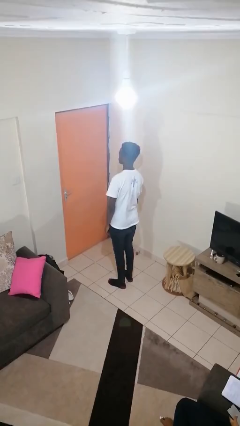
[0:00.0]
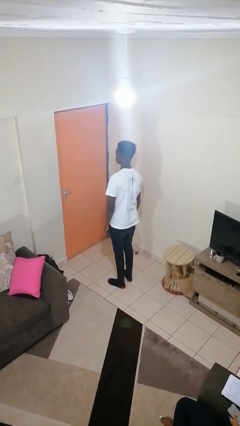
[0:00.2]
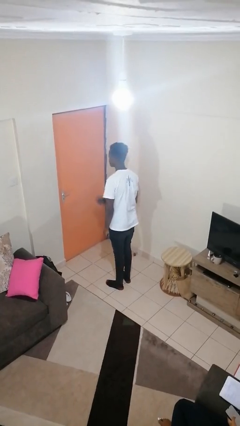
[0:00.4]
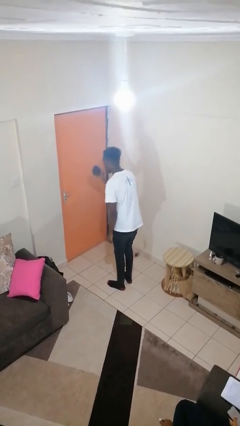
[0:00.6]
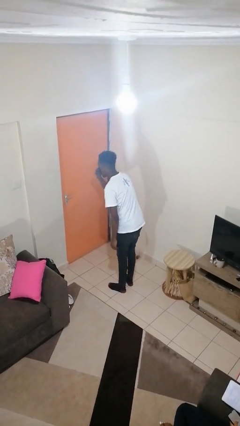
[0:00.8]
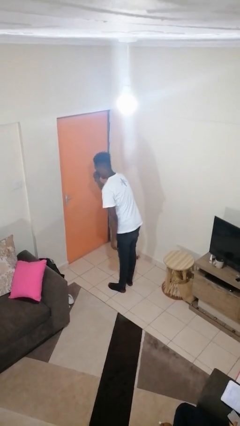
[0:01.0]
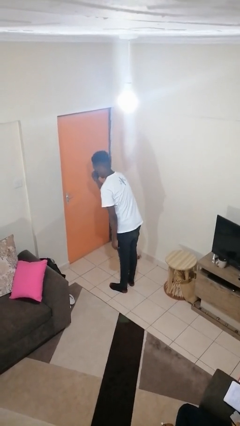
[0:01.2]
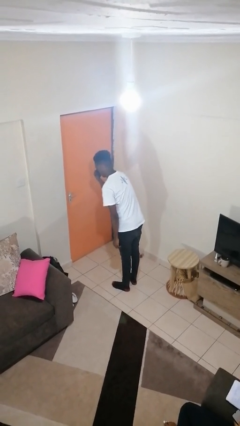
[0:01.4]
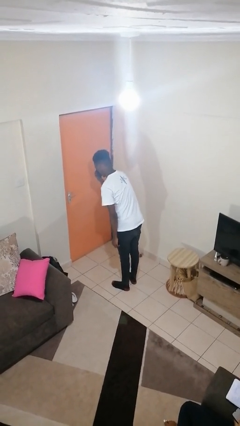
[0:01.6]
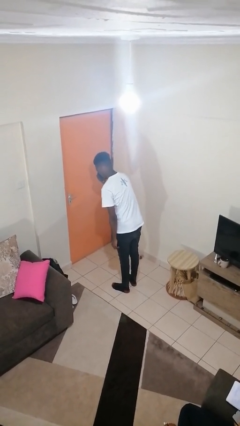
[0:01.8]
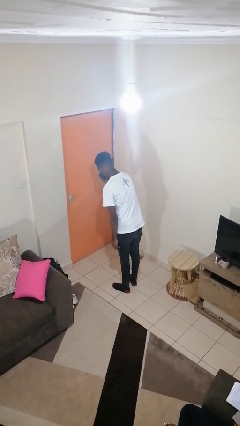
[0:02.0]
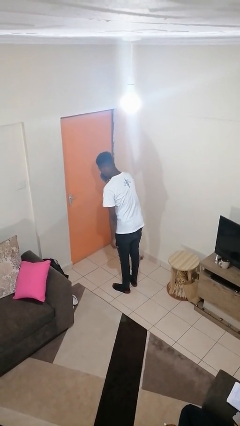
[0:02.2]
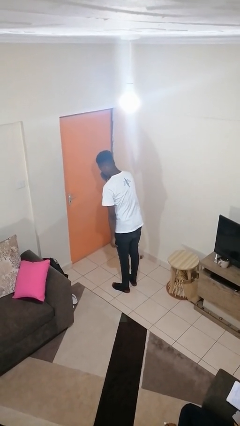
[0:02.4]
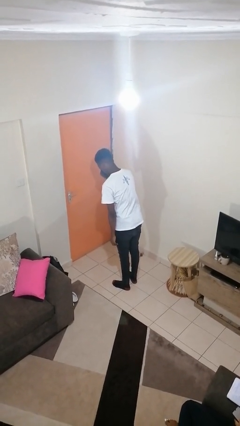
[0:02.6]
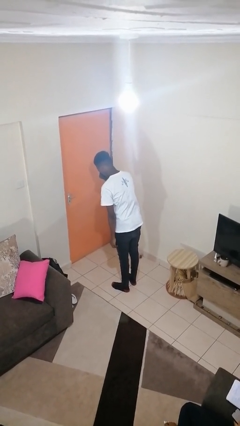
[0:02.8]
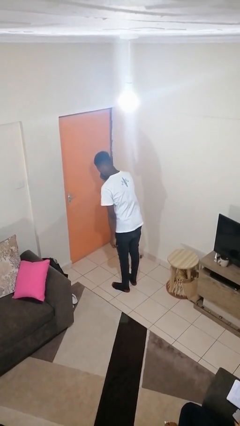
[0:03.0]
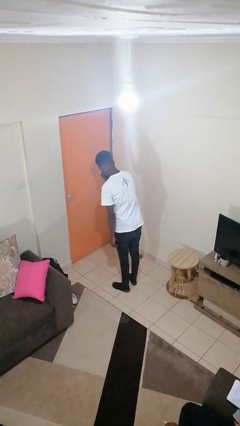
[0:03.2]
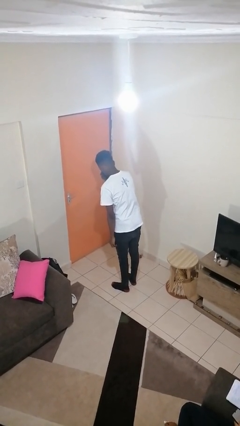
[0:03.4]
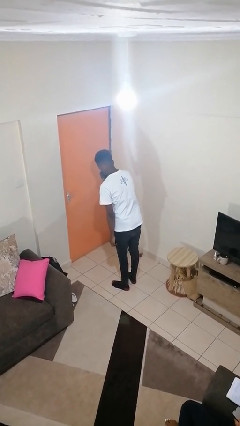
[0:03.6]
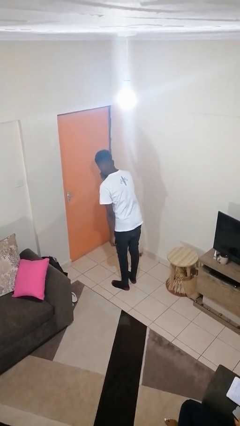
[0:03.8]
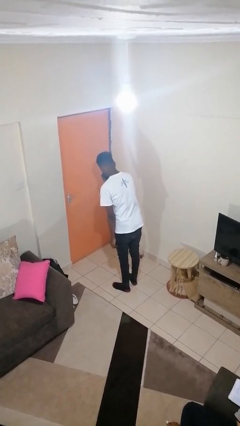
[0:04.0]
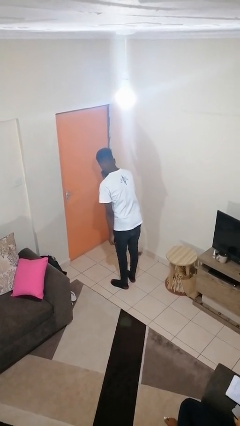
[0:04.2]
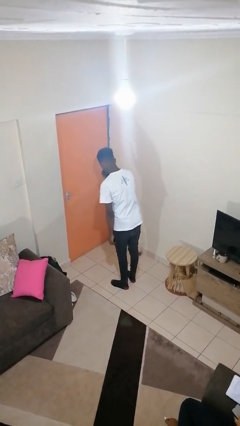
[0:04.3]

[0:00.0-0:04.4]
person blows nose

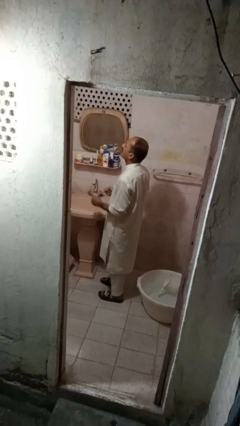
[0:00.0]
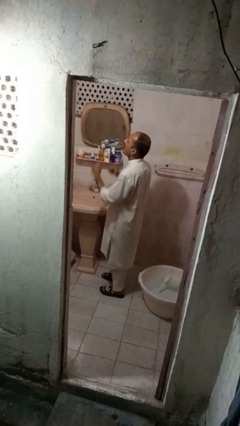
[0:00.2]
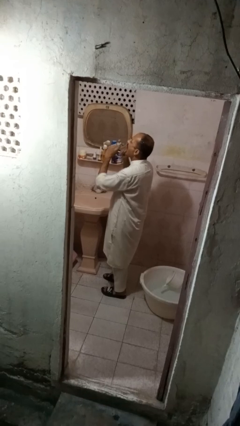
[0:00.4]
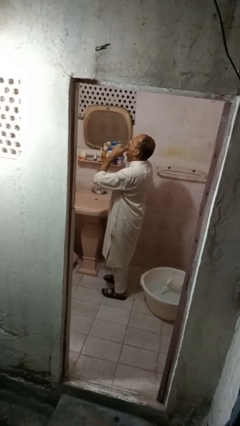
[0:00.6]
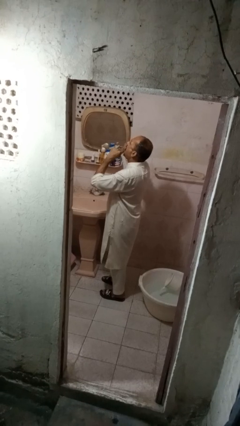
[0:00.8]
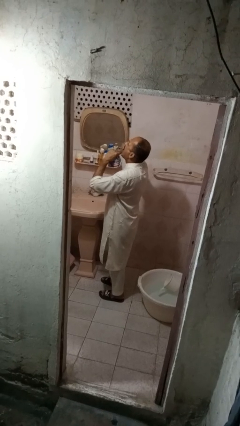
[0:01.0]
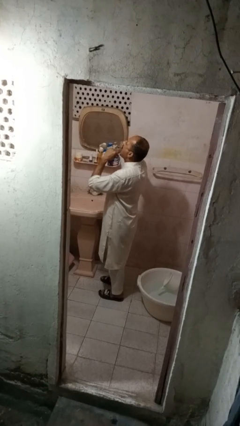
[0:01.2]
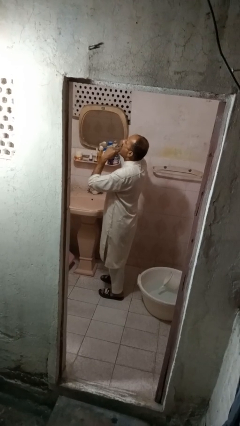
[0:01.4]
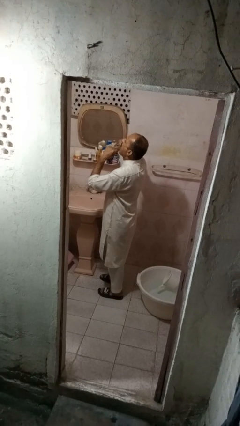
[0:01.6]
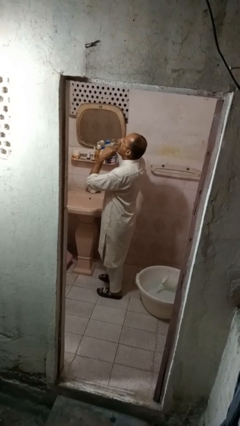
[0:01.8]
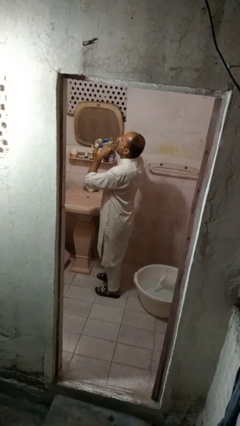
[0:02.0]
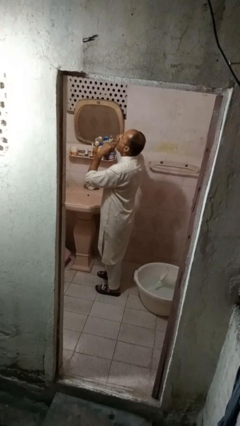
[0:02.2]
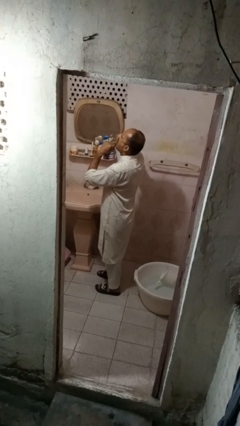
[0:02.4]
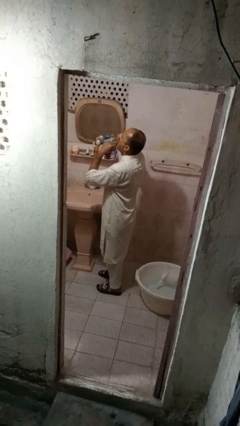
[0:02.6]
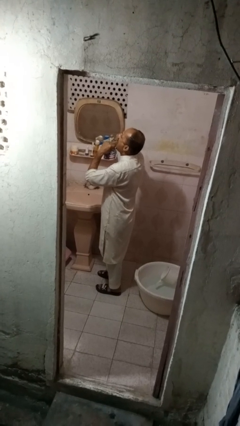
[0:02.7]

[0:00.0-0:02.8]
person flosses

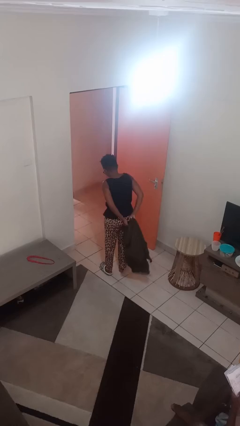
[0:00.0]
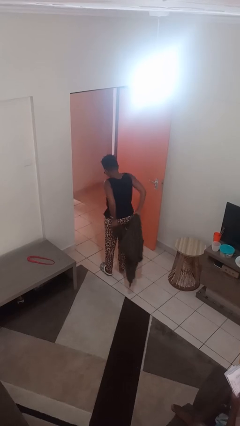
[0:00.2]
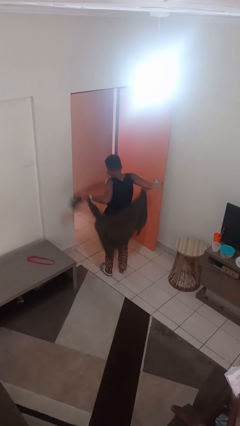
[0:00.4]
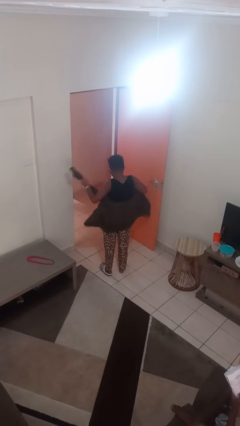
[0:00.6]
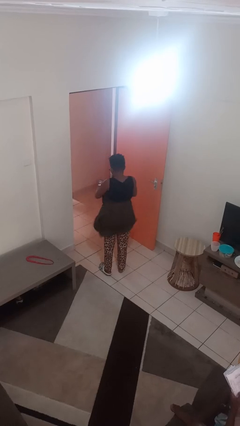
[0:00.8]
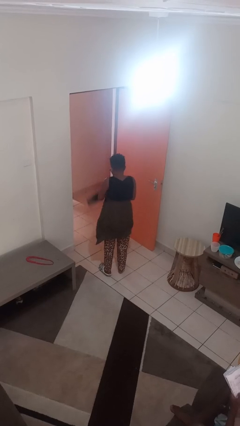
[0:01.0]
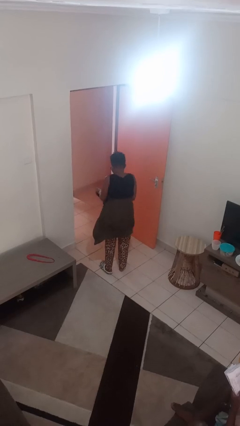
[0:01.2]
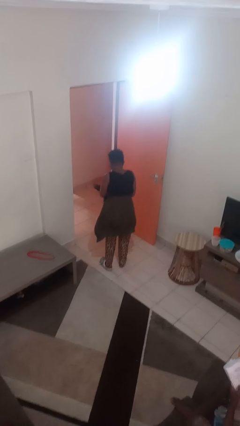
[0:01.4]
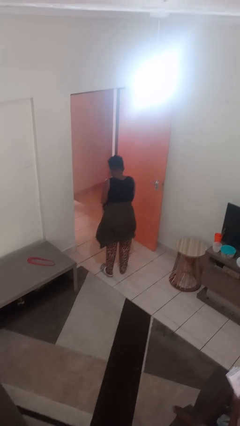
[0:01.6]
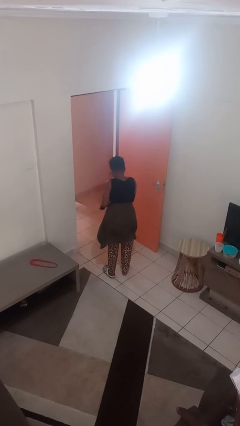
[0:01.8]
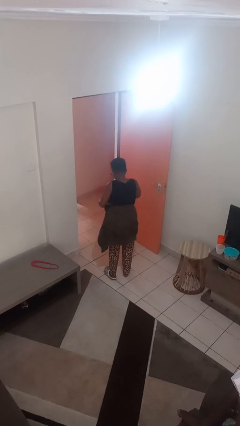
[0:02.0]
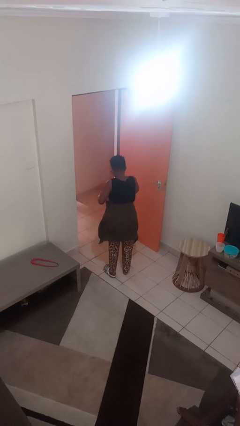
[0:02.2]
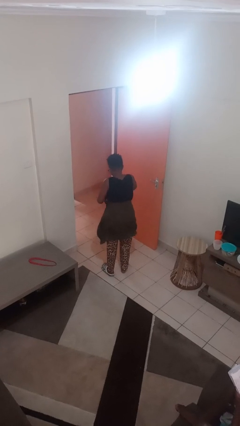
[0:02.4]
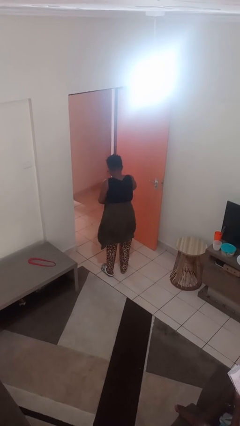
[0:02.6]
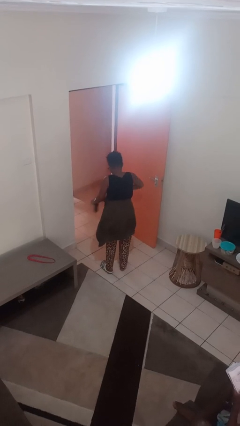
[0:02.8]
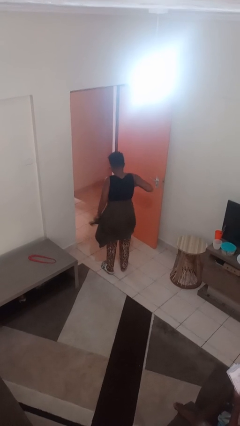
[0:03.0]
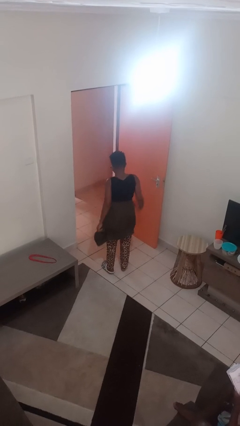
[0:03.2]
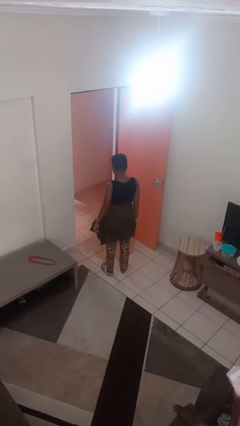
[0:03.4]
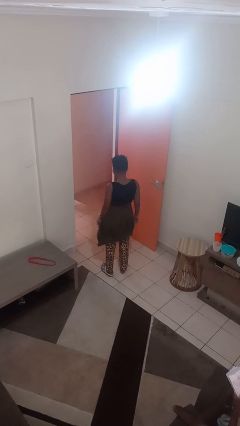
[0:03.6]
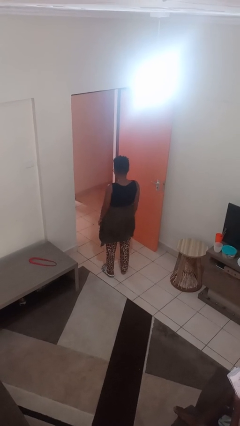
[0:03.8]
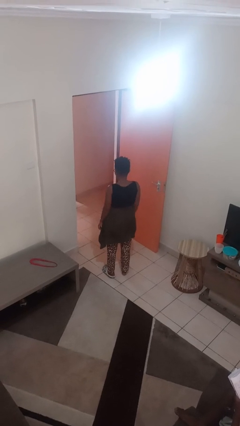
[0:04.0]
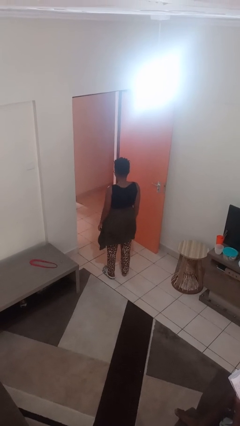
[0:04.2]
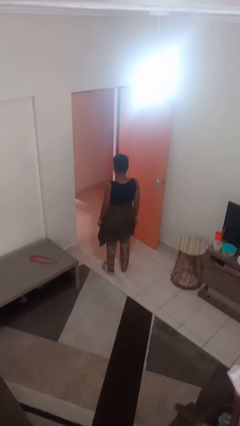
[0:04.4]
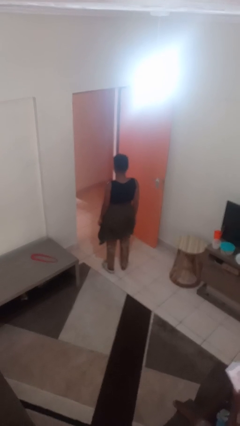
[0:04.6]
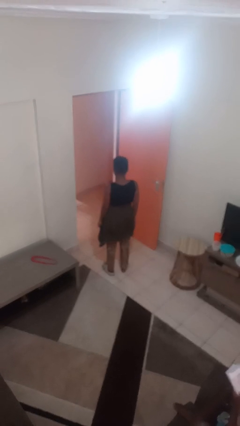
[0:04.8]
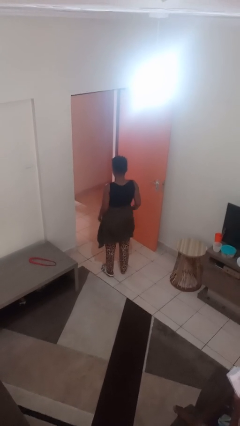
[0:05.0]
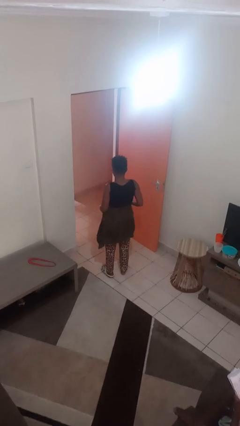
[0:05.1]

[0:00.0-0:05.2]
person ties jacket around waist

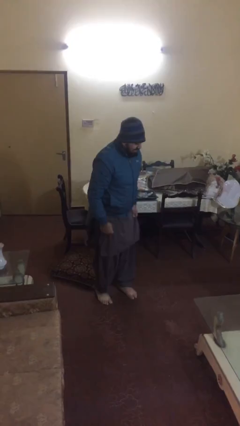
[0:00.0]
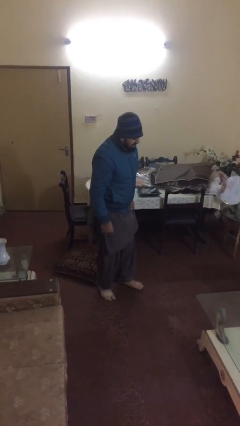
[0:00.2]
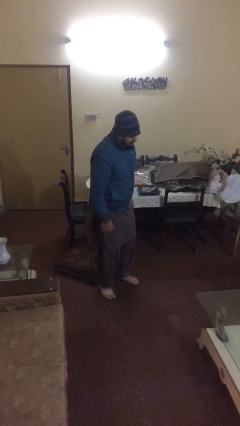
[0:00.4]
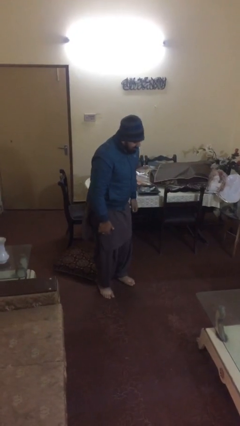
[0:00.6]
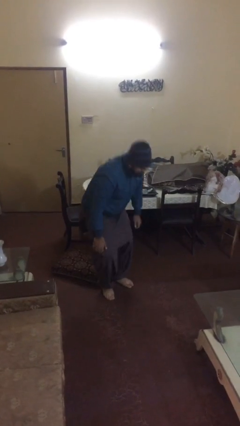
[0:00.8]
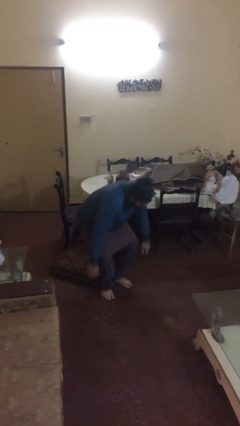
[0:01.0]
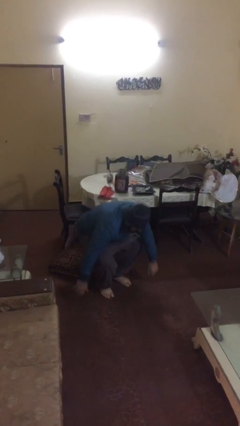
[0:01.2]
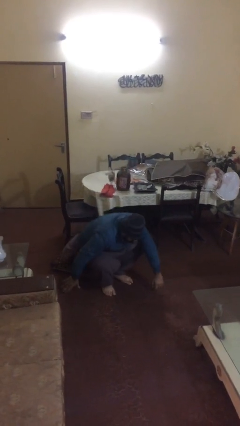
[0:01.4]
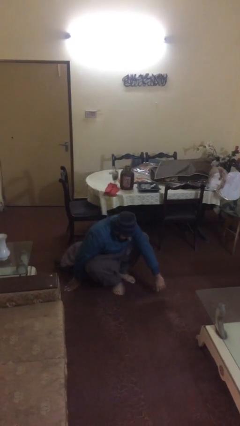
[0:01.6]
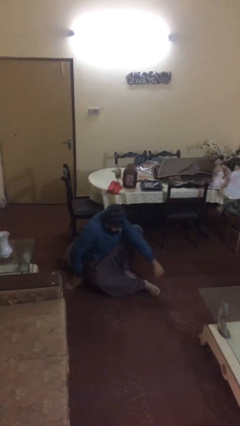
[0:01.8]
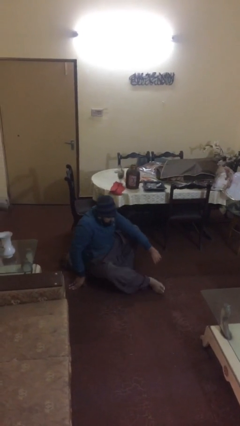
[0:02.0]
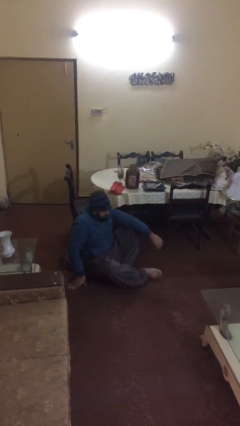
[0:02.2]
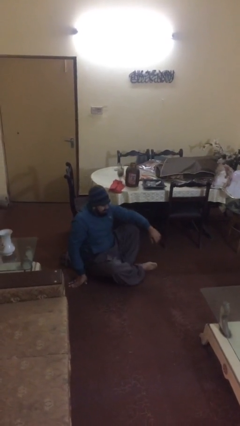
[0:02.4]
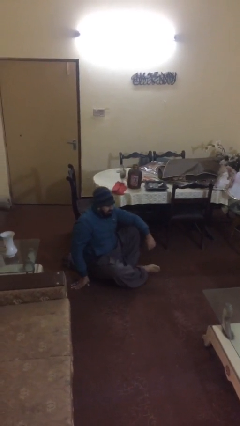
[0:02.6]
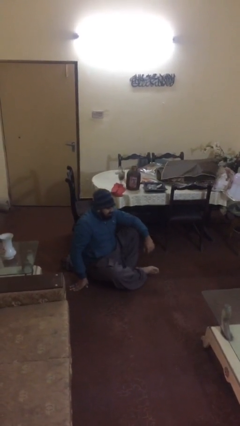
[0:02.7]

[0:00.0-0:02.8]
person sits down

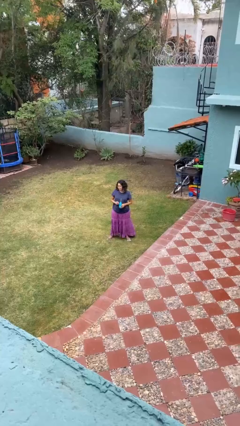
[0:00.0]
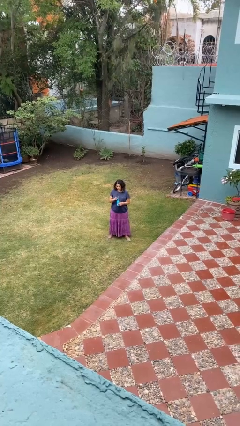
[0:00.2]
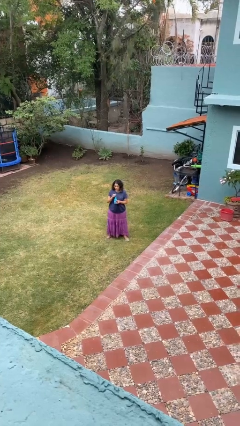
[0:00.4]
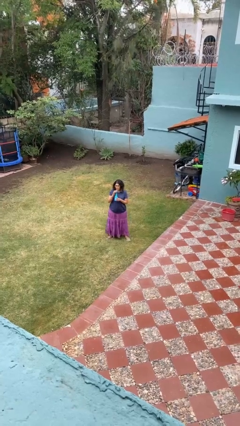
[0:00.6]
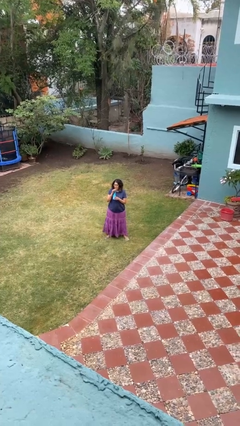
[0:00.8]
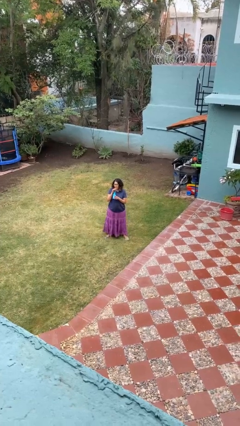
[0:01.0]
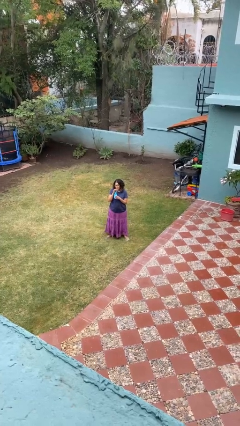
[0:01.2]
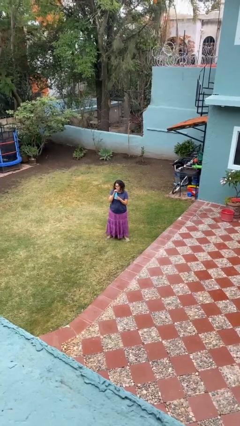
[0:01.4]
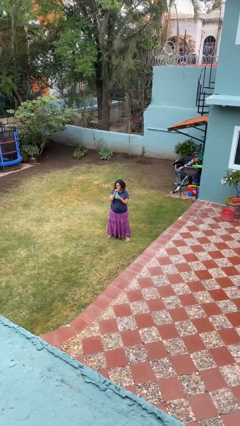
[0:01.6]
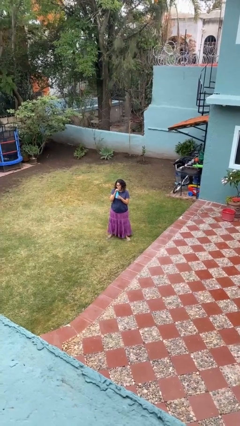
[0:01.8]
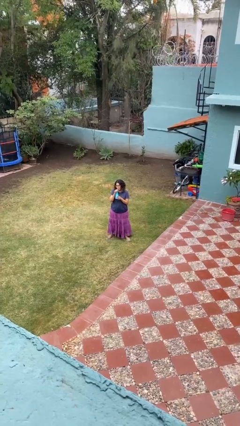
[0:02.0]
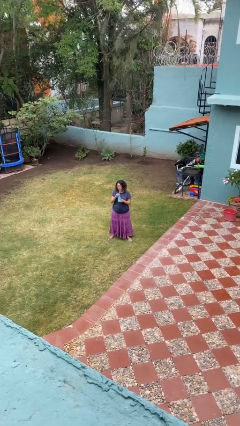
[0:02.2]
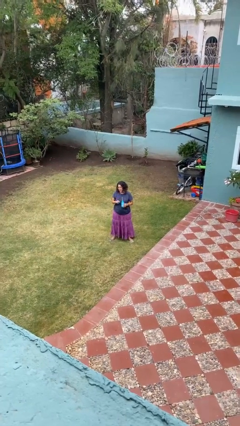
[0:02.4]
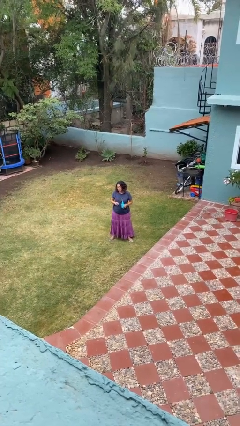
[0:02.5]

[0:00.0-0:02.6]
person drinks from straw
